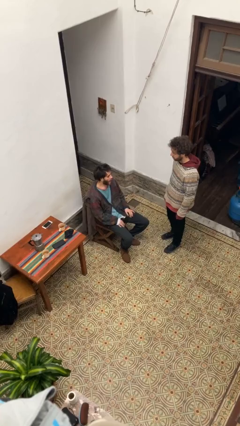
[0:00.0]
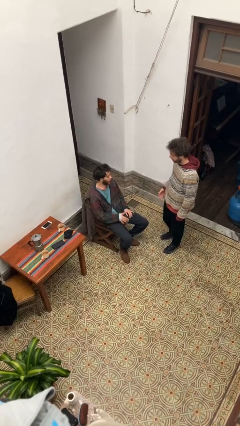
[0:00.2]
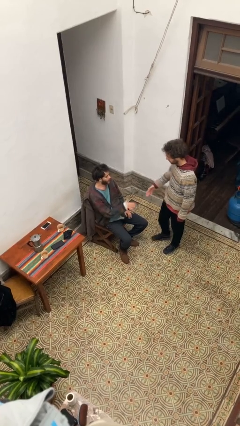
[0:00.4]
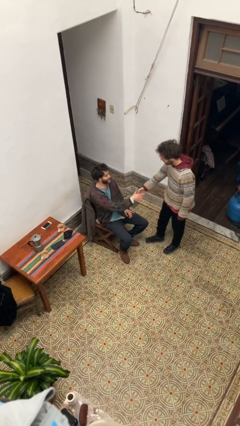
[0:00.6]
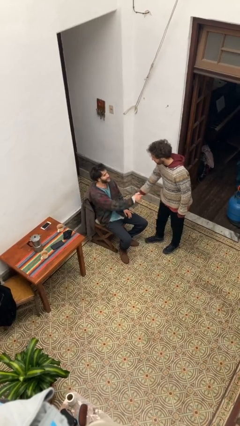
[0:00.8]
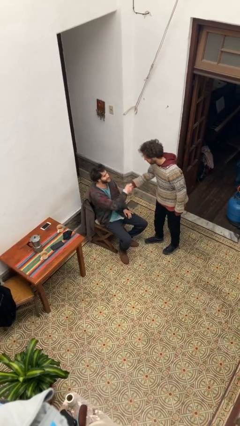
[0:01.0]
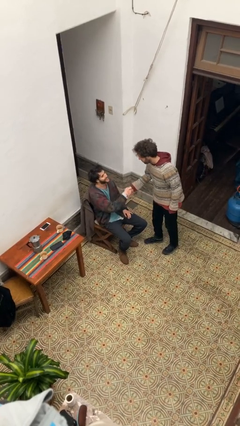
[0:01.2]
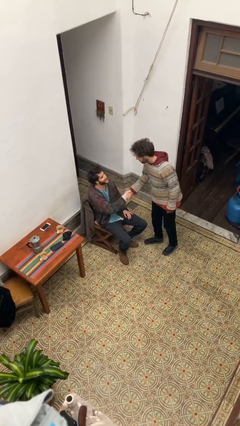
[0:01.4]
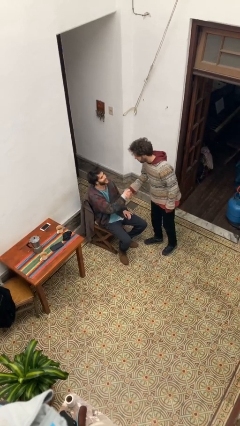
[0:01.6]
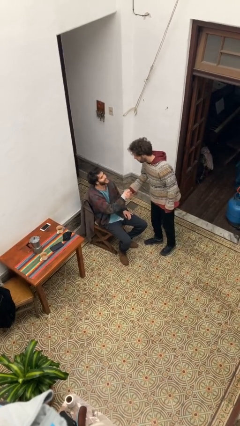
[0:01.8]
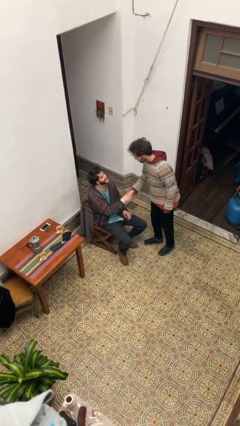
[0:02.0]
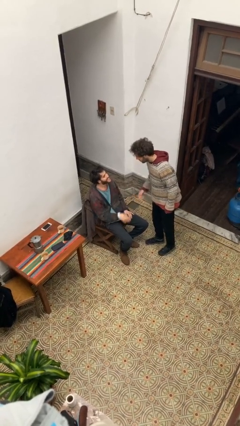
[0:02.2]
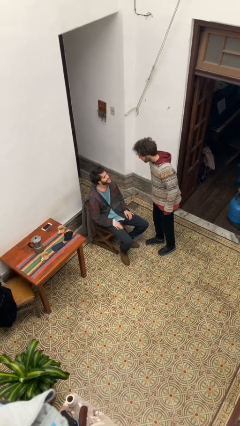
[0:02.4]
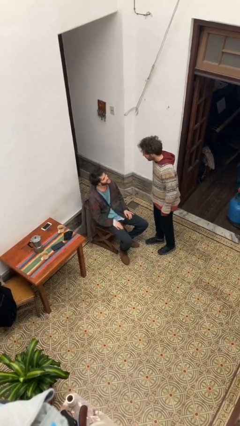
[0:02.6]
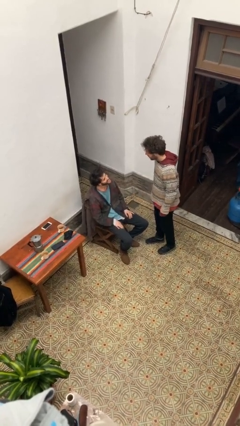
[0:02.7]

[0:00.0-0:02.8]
person shakes hand

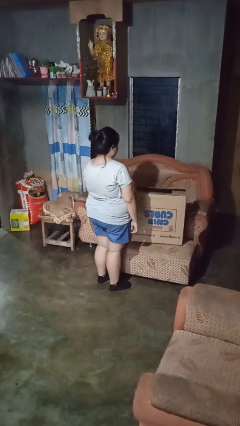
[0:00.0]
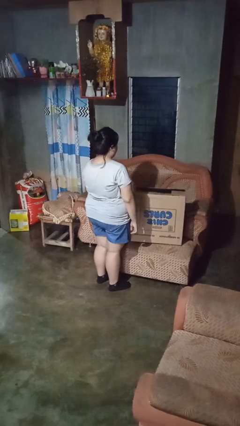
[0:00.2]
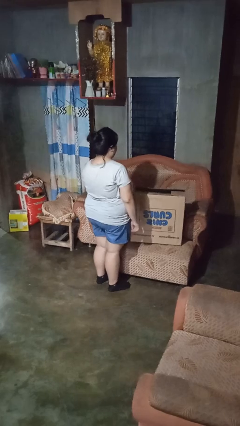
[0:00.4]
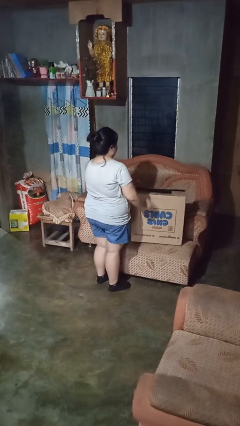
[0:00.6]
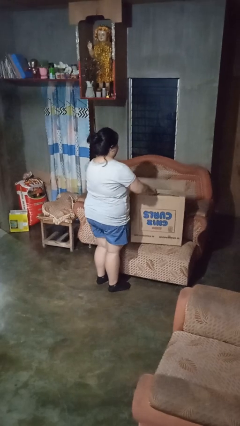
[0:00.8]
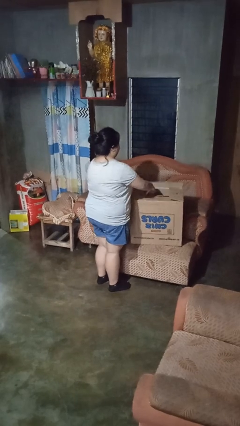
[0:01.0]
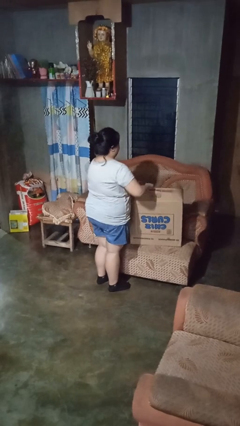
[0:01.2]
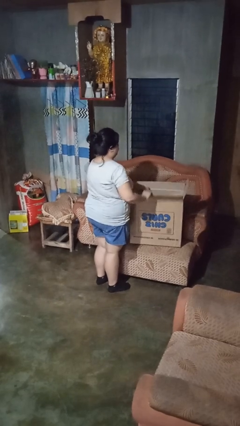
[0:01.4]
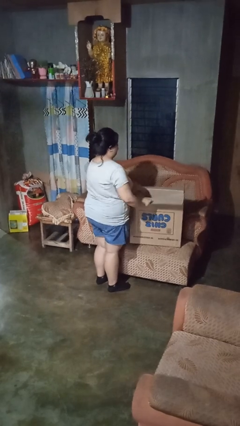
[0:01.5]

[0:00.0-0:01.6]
person opens box

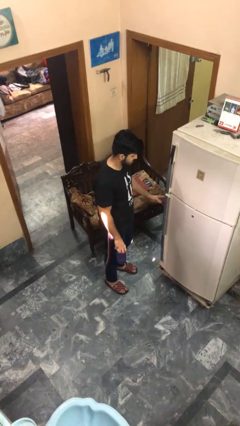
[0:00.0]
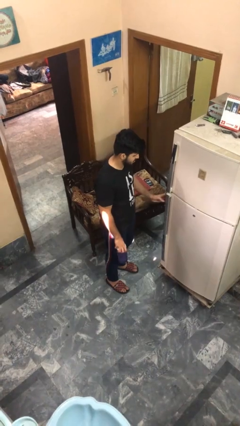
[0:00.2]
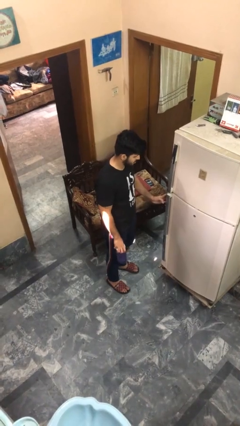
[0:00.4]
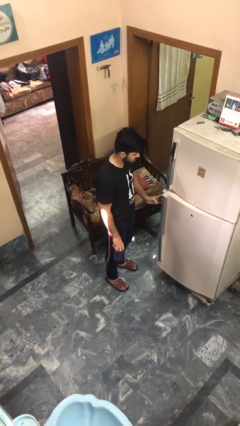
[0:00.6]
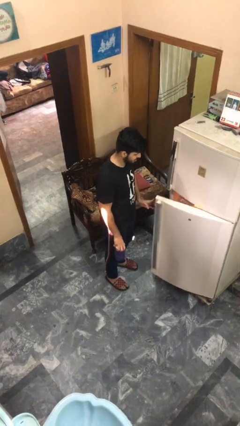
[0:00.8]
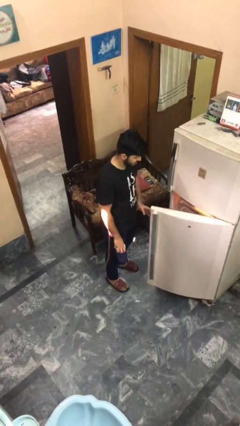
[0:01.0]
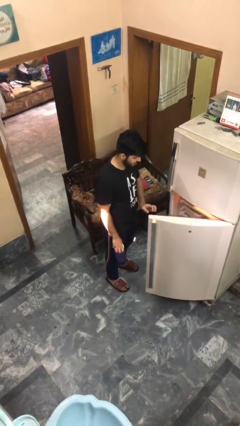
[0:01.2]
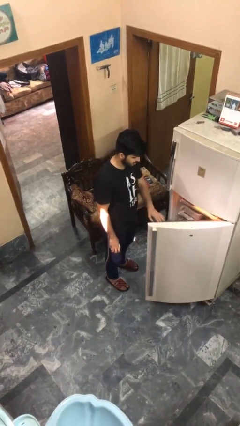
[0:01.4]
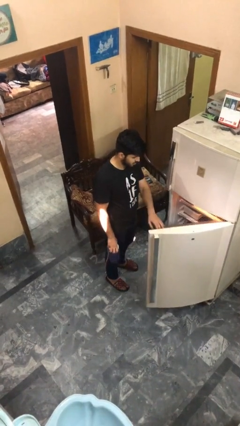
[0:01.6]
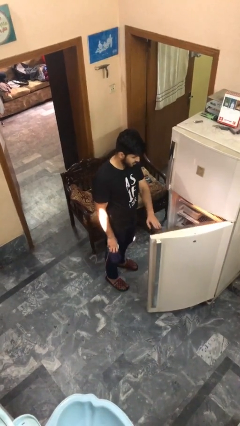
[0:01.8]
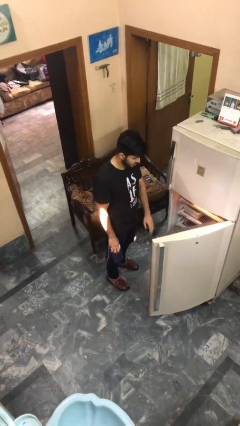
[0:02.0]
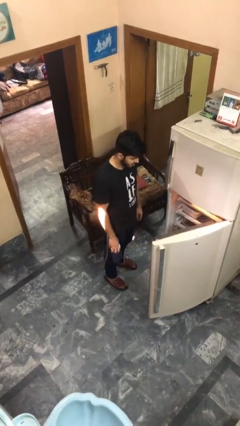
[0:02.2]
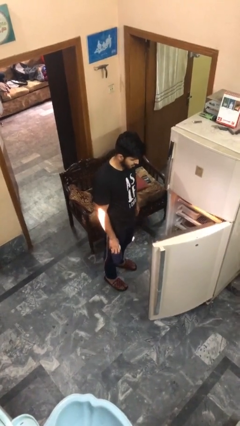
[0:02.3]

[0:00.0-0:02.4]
person opens refrigerator

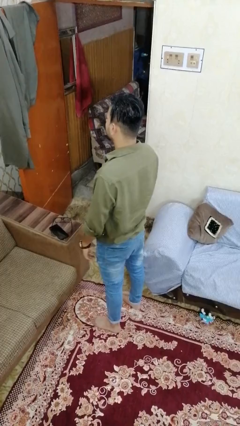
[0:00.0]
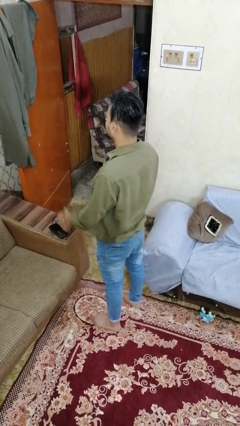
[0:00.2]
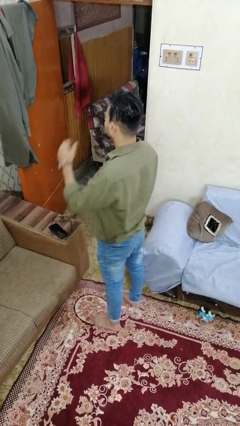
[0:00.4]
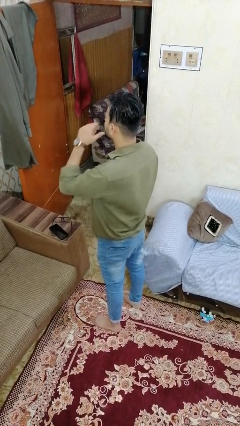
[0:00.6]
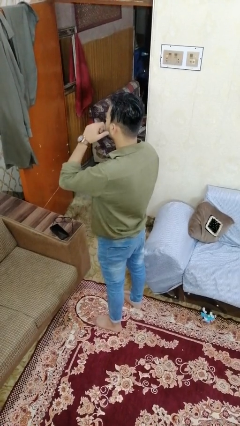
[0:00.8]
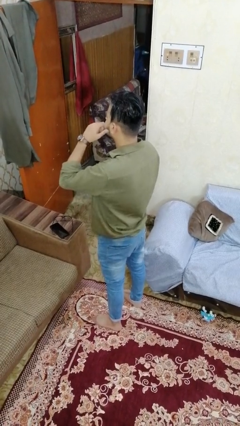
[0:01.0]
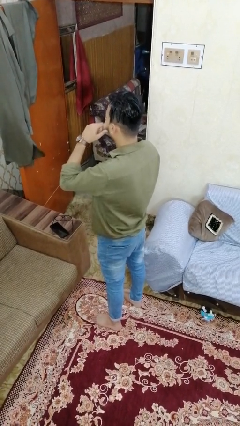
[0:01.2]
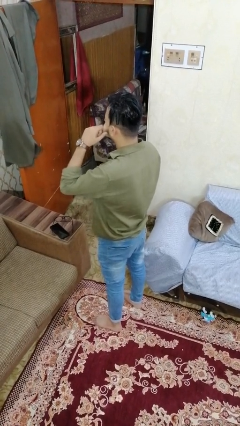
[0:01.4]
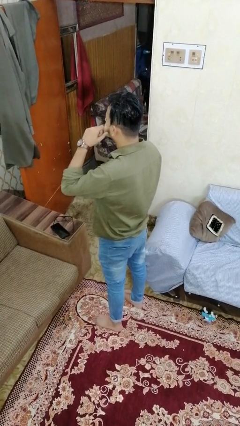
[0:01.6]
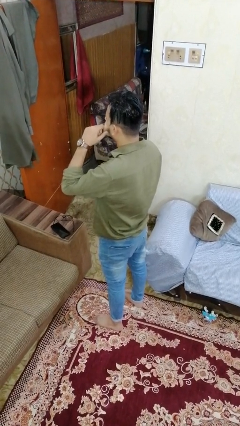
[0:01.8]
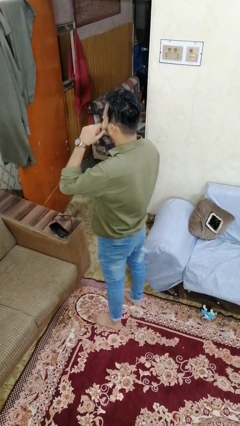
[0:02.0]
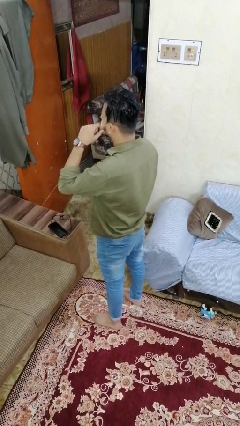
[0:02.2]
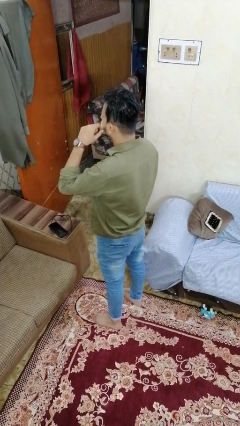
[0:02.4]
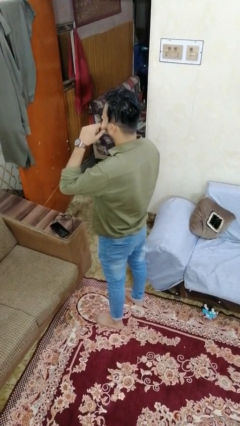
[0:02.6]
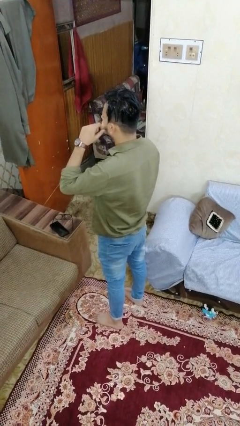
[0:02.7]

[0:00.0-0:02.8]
person scratches face

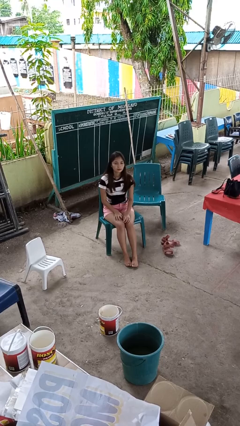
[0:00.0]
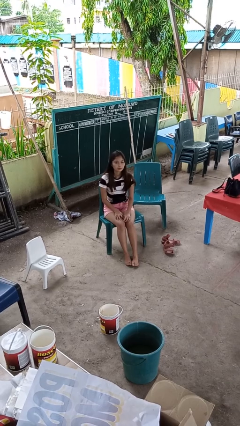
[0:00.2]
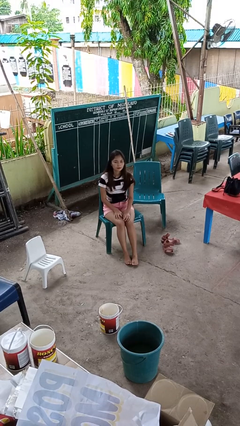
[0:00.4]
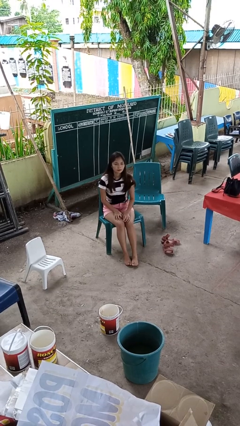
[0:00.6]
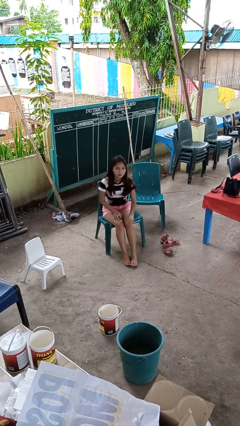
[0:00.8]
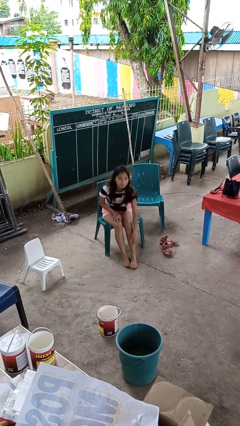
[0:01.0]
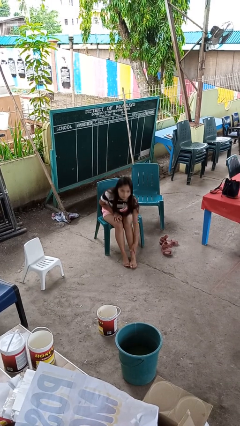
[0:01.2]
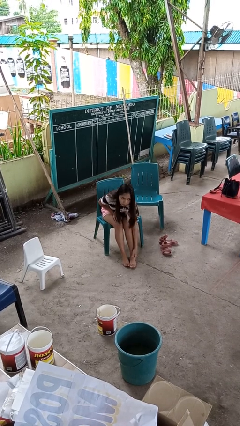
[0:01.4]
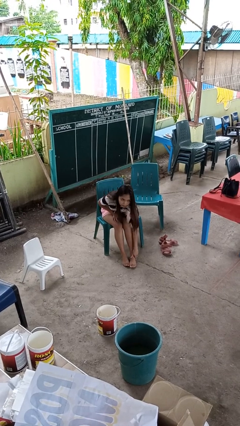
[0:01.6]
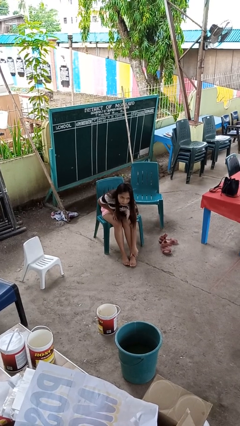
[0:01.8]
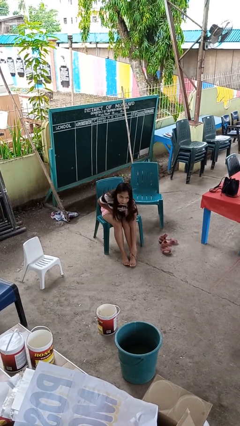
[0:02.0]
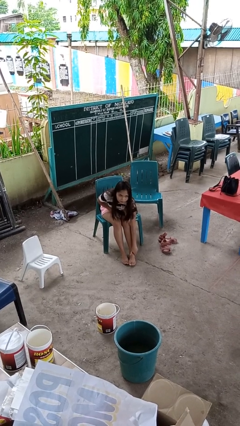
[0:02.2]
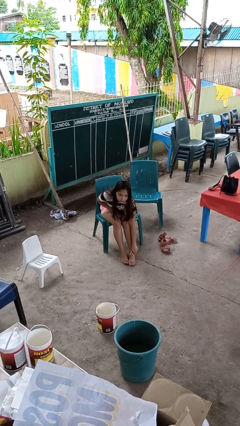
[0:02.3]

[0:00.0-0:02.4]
person rubs foot

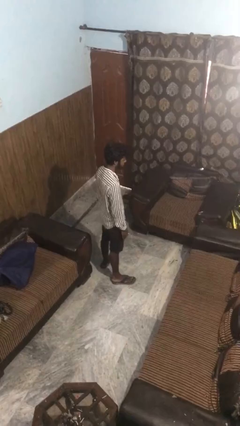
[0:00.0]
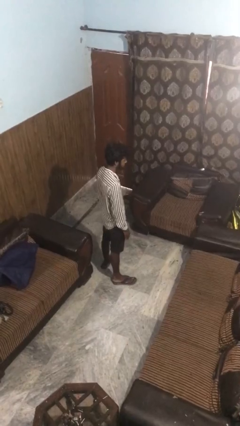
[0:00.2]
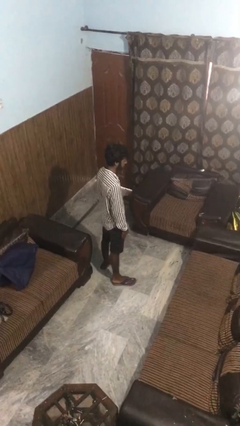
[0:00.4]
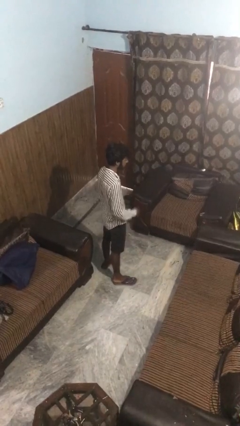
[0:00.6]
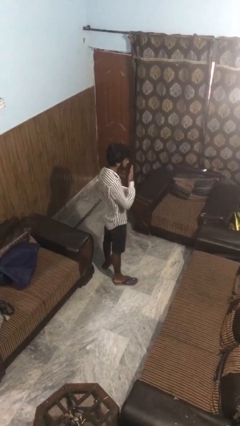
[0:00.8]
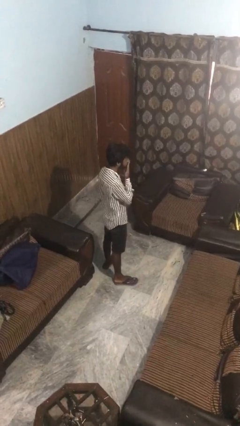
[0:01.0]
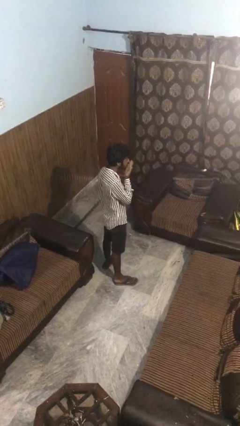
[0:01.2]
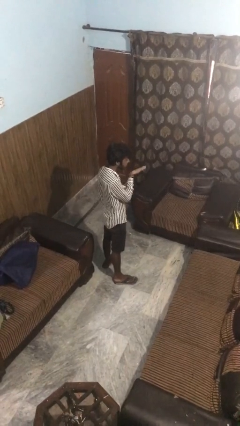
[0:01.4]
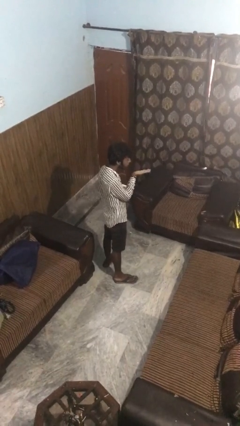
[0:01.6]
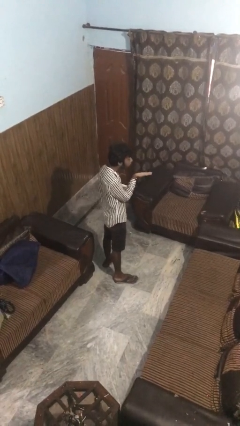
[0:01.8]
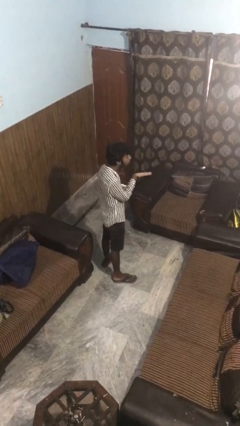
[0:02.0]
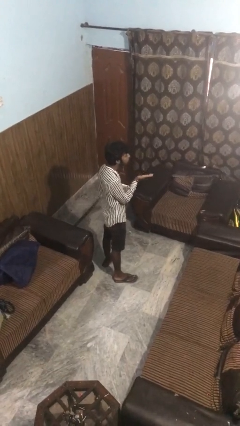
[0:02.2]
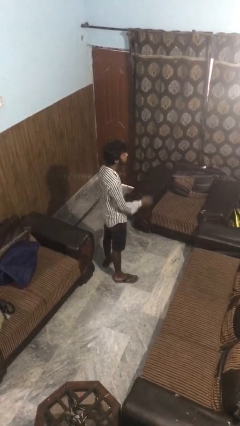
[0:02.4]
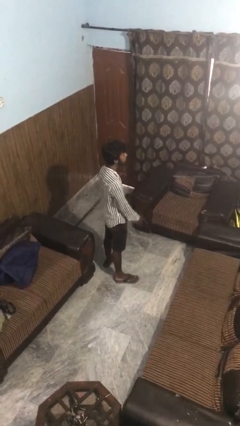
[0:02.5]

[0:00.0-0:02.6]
person gestures blow kiss

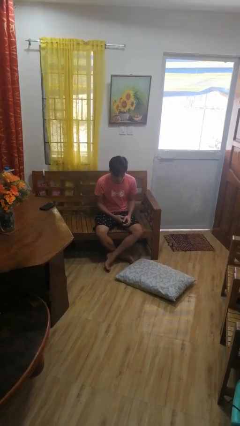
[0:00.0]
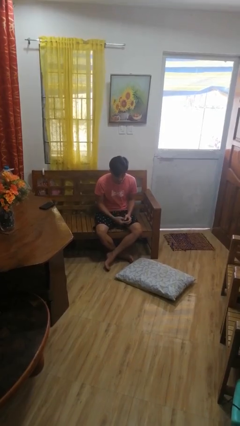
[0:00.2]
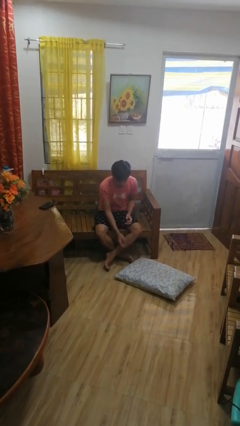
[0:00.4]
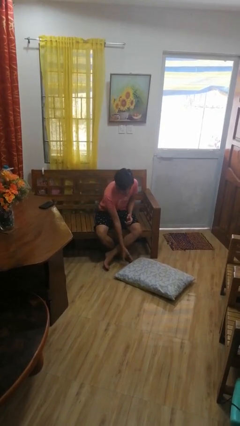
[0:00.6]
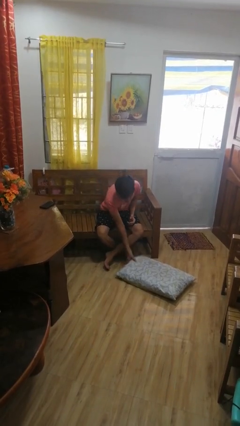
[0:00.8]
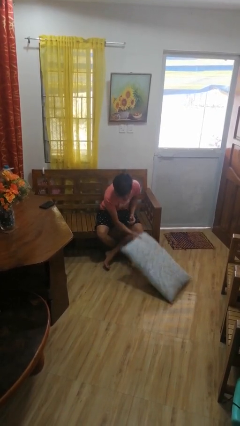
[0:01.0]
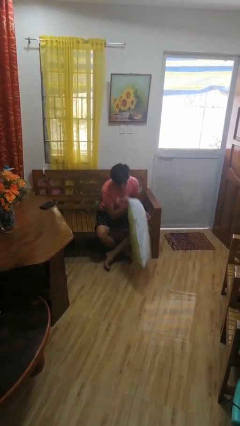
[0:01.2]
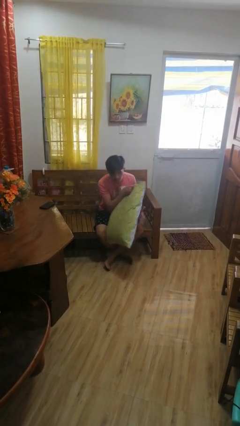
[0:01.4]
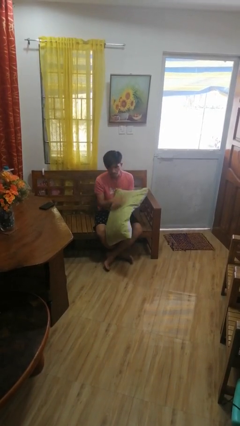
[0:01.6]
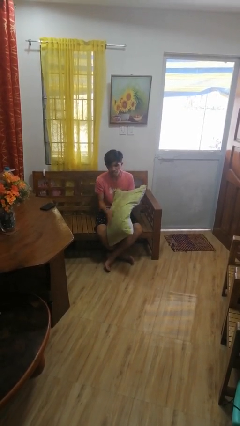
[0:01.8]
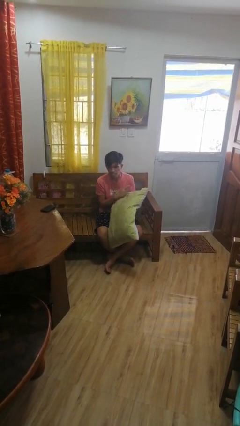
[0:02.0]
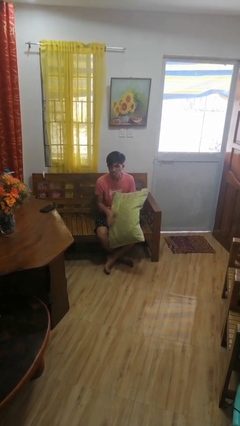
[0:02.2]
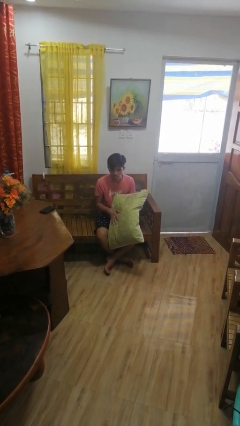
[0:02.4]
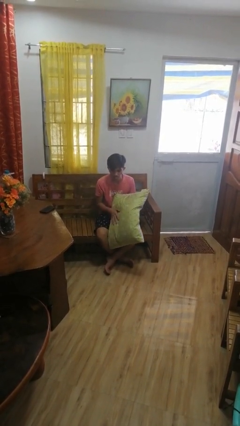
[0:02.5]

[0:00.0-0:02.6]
person picks up object from floor
